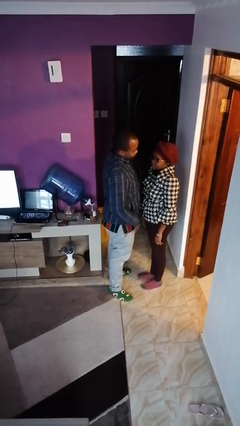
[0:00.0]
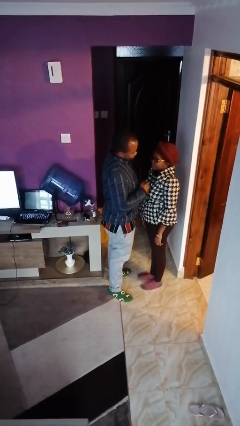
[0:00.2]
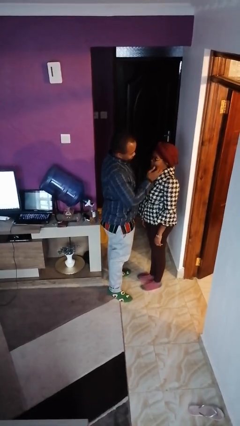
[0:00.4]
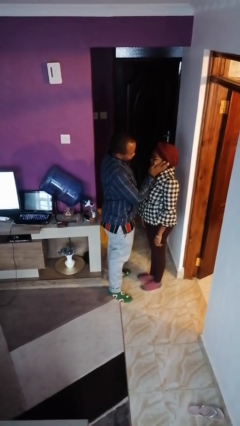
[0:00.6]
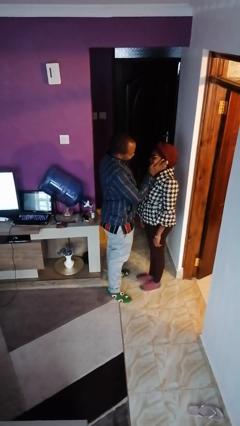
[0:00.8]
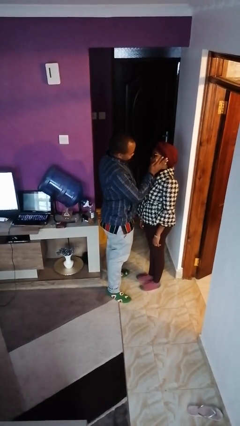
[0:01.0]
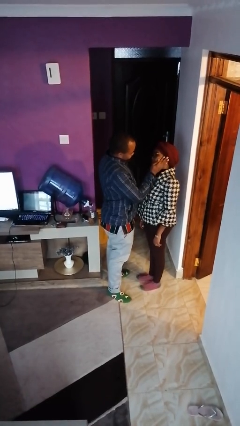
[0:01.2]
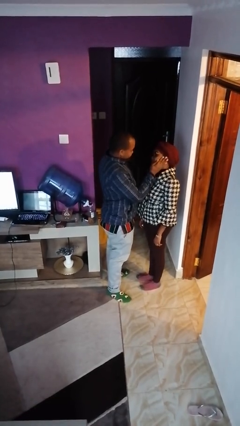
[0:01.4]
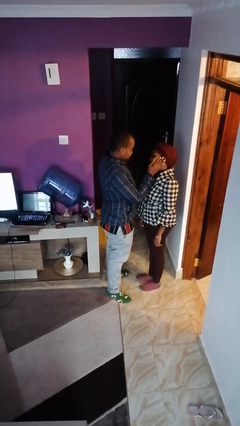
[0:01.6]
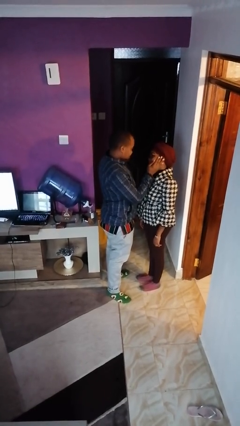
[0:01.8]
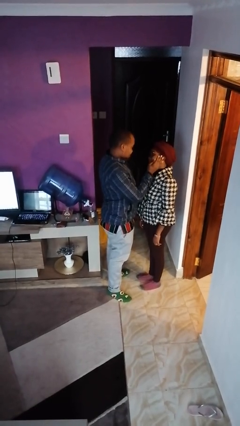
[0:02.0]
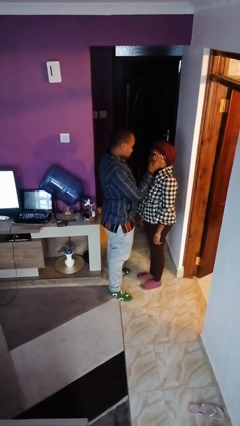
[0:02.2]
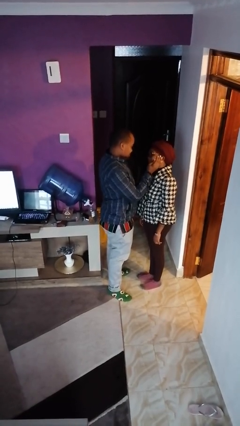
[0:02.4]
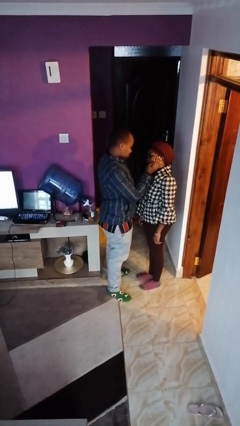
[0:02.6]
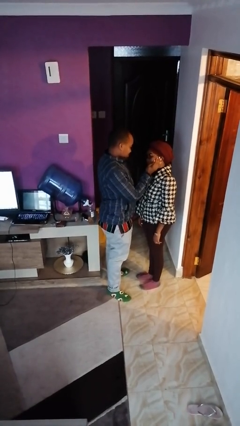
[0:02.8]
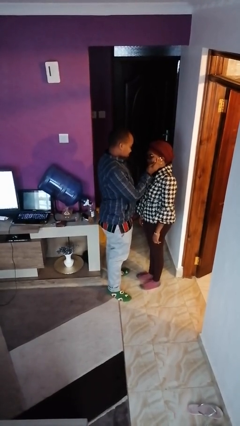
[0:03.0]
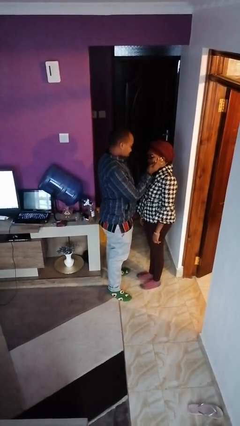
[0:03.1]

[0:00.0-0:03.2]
person touches face of person

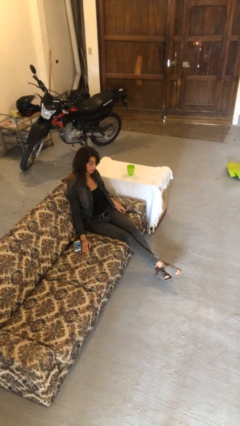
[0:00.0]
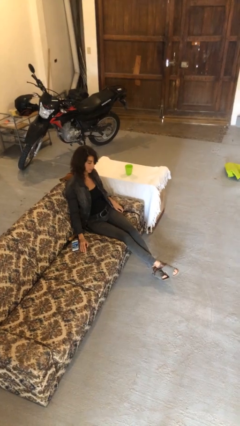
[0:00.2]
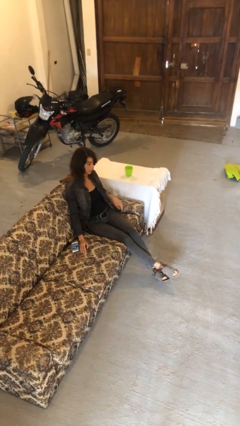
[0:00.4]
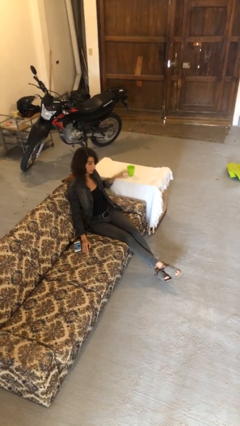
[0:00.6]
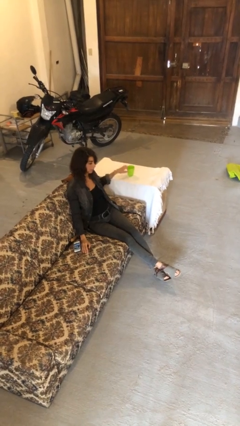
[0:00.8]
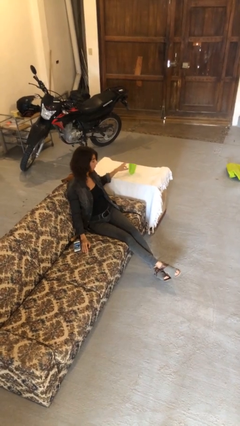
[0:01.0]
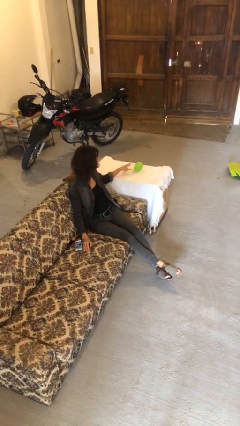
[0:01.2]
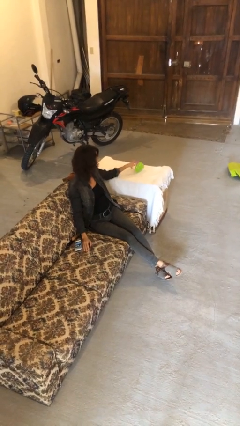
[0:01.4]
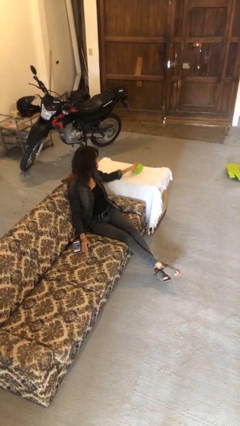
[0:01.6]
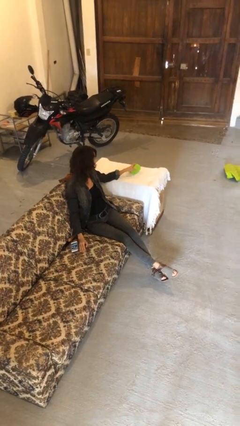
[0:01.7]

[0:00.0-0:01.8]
person knocks over glass

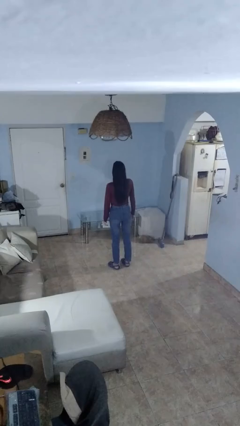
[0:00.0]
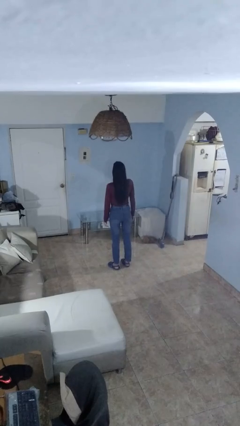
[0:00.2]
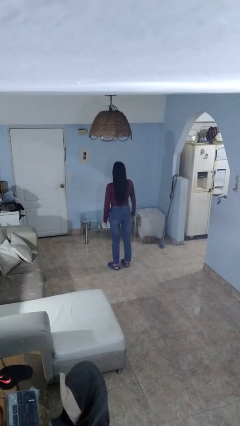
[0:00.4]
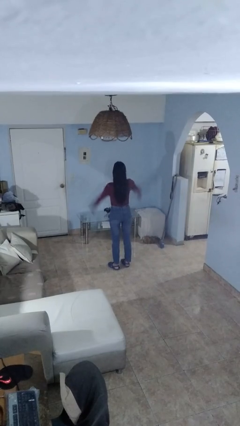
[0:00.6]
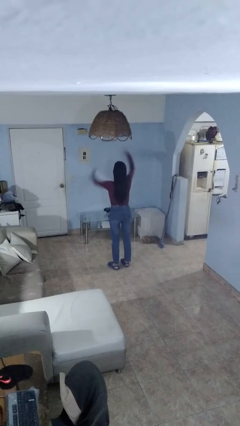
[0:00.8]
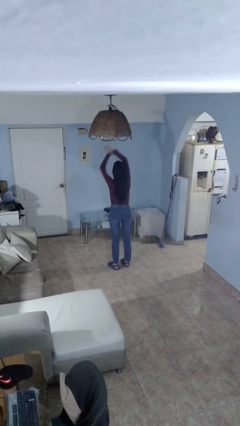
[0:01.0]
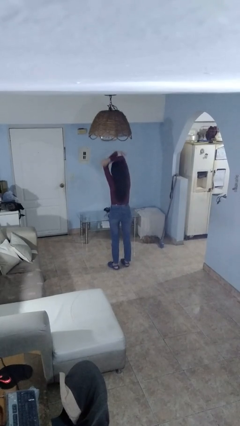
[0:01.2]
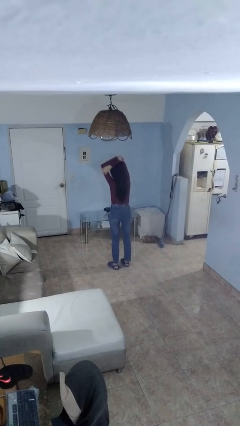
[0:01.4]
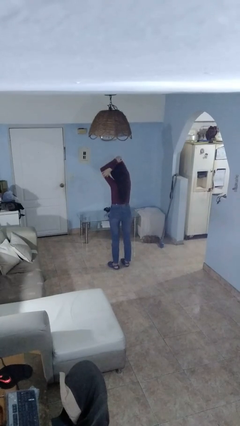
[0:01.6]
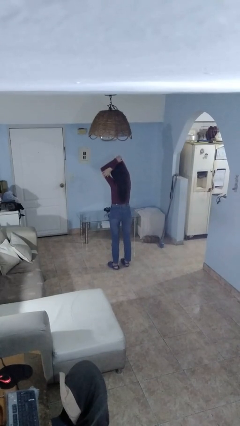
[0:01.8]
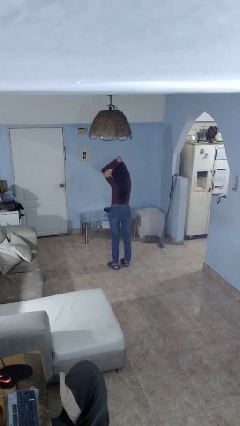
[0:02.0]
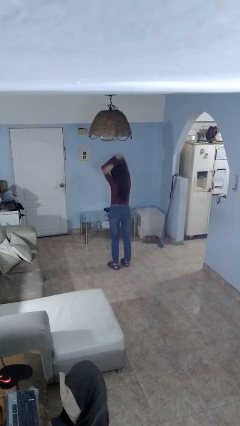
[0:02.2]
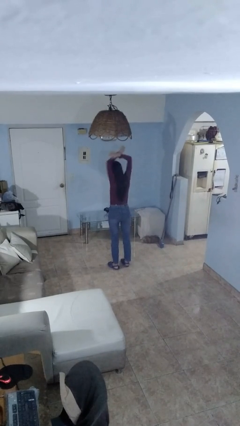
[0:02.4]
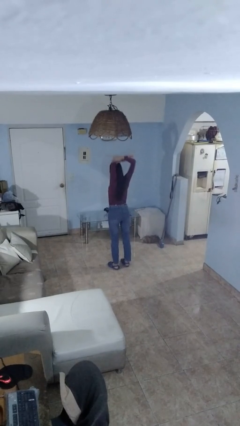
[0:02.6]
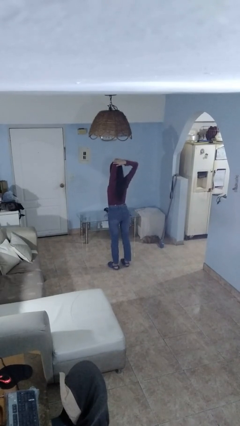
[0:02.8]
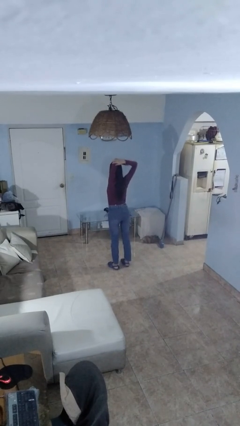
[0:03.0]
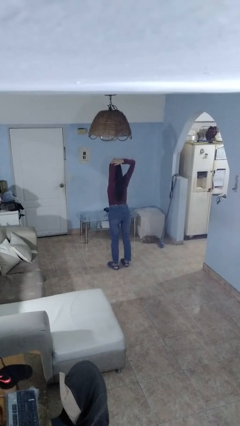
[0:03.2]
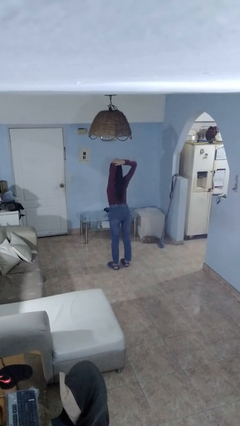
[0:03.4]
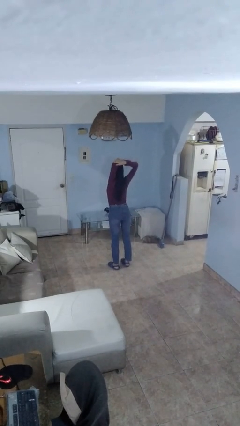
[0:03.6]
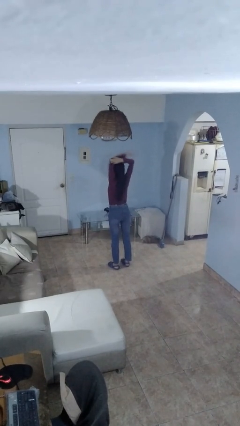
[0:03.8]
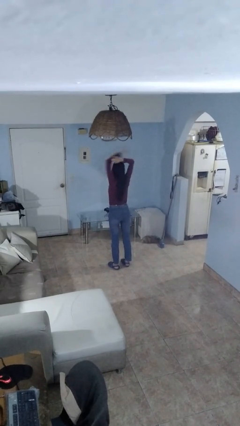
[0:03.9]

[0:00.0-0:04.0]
person stretches arms over head

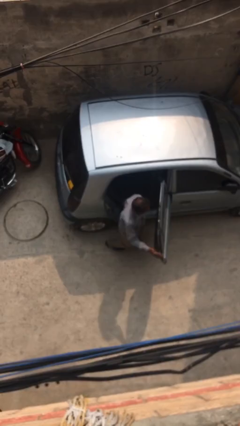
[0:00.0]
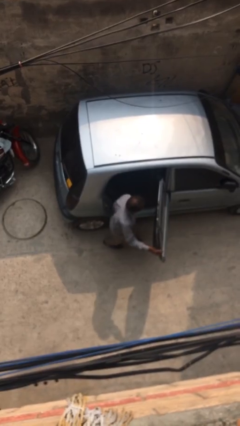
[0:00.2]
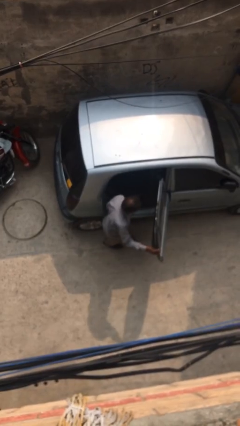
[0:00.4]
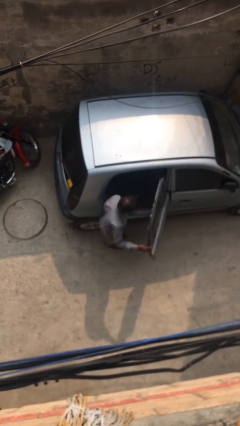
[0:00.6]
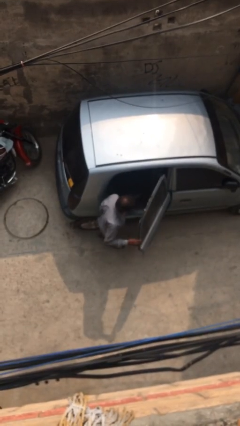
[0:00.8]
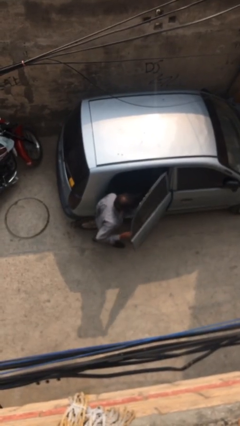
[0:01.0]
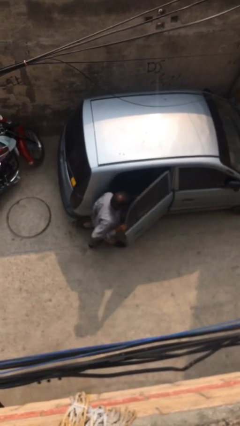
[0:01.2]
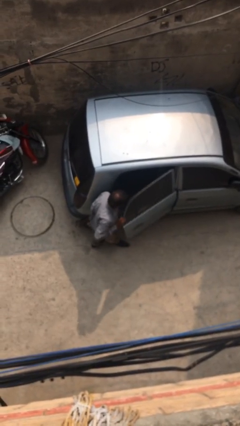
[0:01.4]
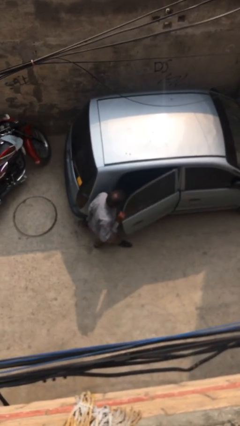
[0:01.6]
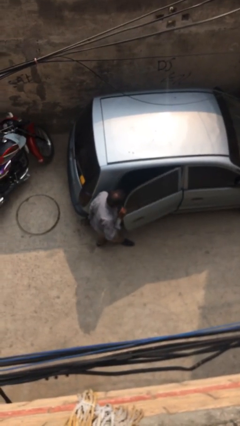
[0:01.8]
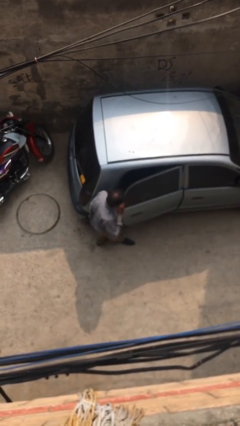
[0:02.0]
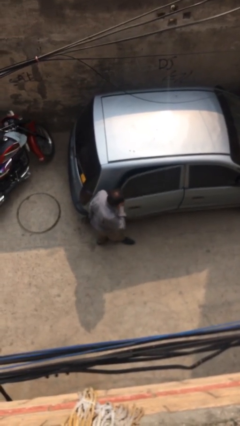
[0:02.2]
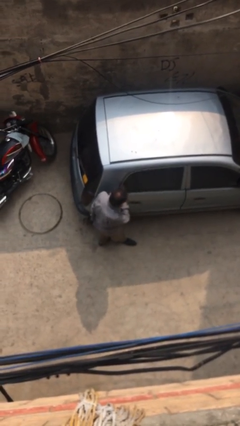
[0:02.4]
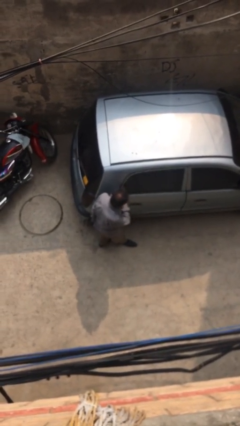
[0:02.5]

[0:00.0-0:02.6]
person closes car door

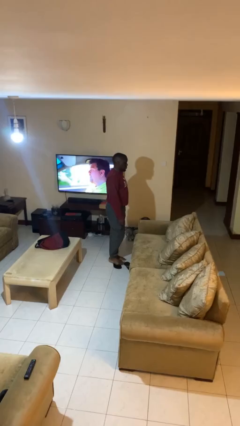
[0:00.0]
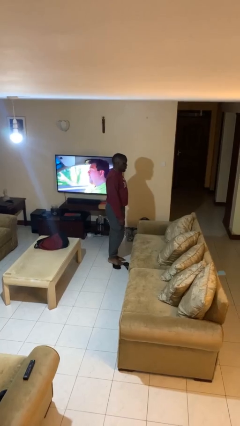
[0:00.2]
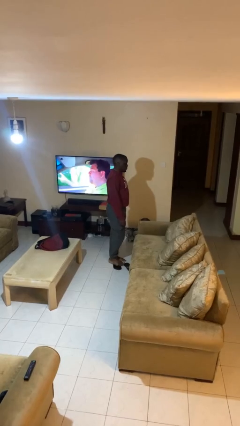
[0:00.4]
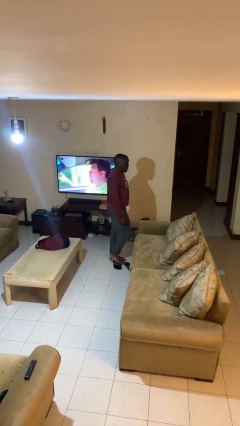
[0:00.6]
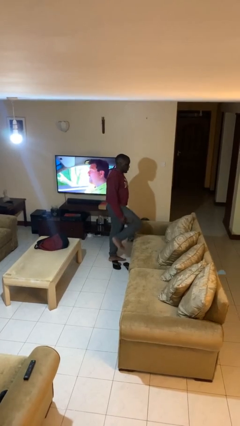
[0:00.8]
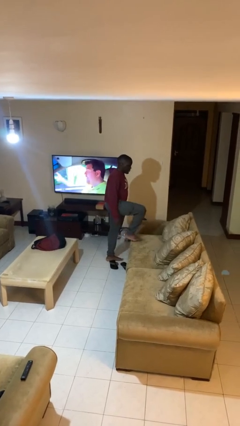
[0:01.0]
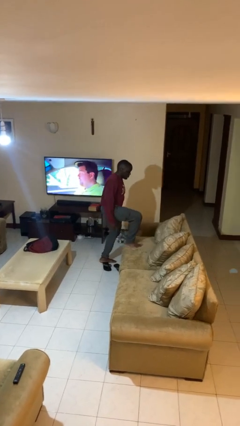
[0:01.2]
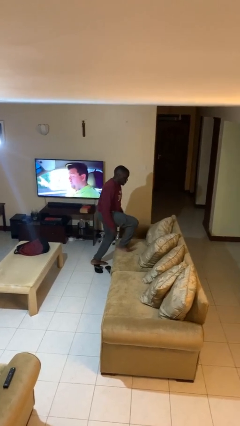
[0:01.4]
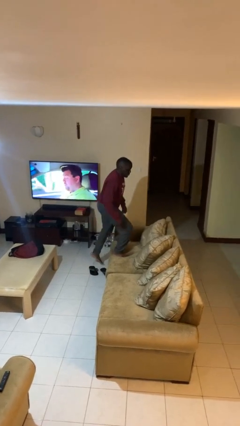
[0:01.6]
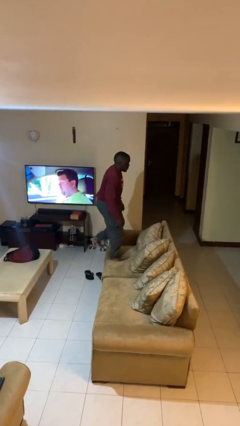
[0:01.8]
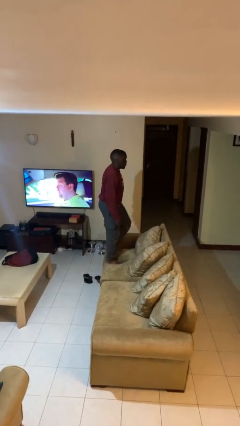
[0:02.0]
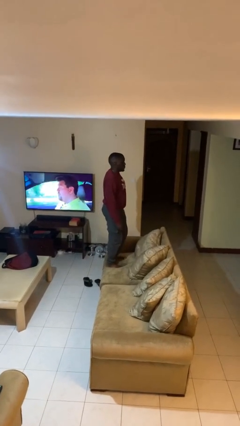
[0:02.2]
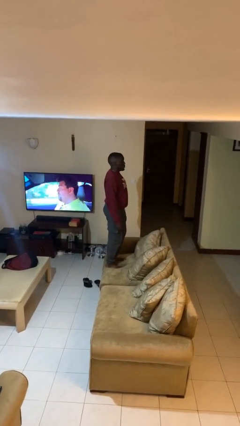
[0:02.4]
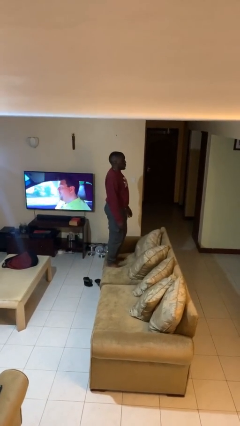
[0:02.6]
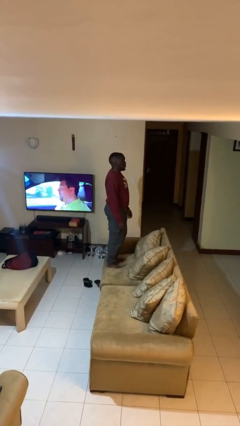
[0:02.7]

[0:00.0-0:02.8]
person climbs on couch

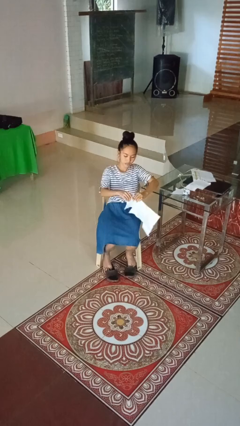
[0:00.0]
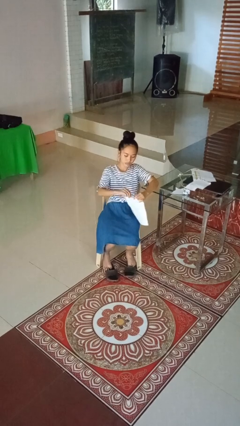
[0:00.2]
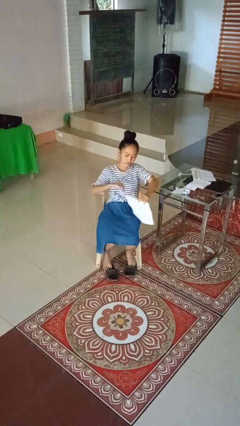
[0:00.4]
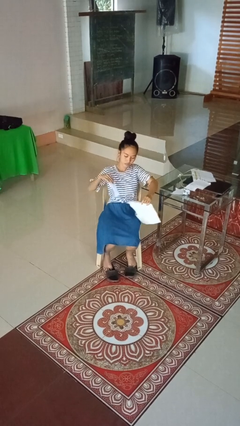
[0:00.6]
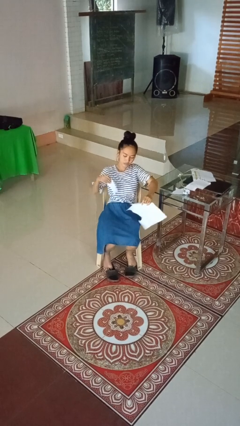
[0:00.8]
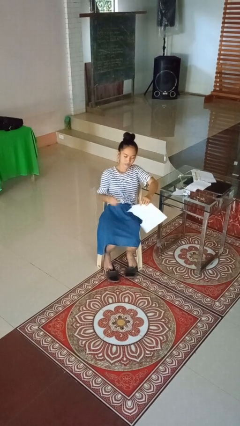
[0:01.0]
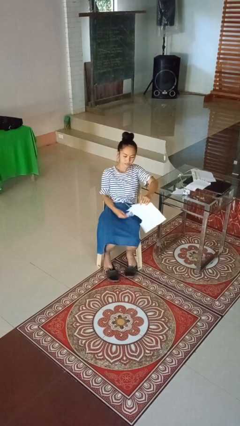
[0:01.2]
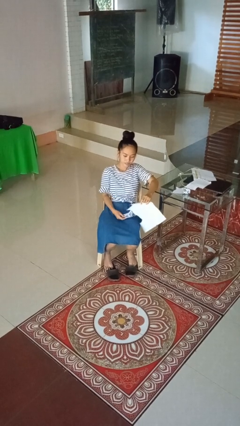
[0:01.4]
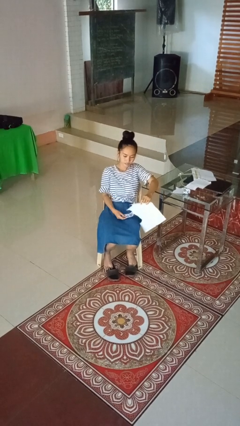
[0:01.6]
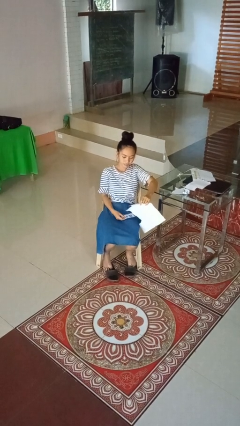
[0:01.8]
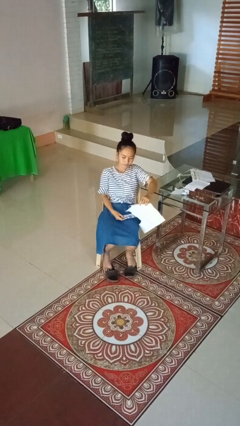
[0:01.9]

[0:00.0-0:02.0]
person tears paper

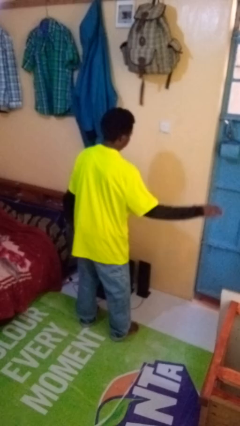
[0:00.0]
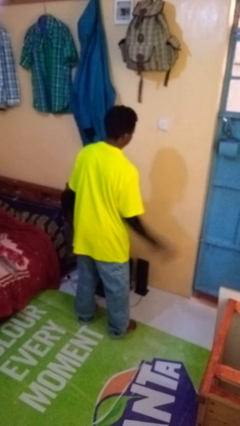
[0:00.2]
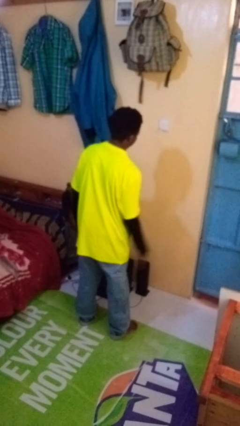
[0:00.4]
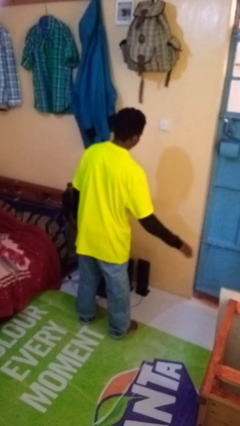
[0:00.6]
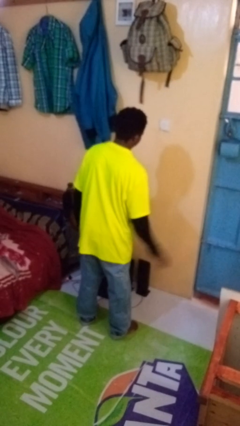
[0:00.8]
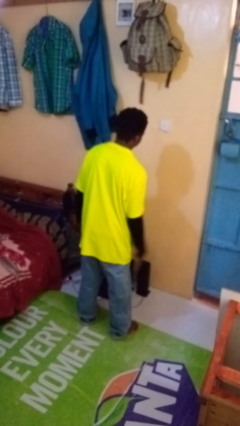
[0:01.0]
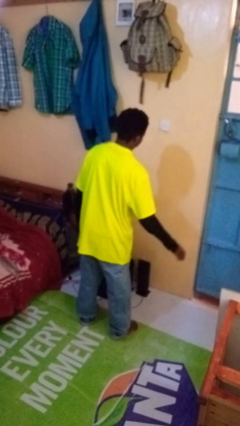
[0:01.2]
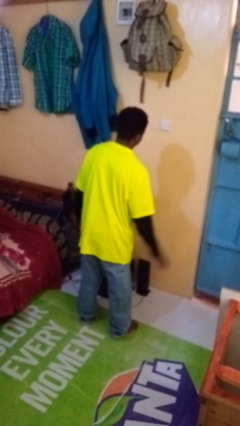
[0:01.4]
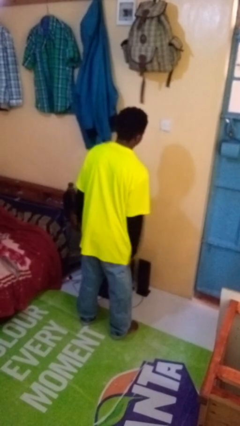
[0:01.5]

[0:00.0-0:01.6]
person slaps hands on thighs
